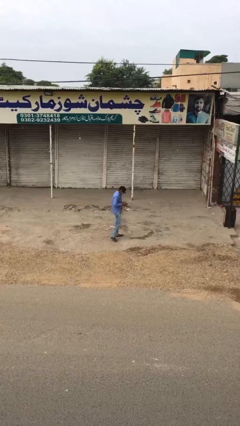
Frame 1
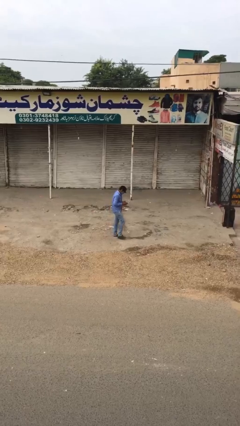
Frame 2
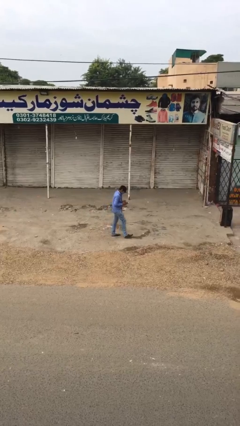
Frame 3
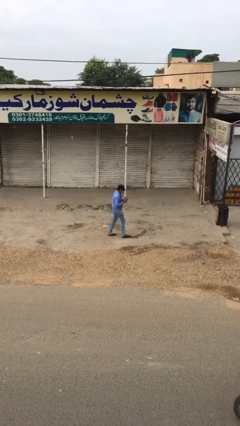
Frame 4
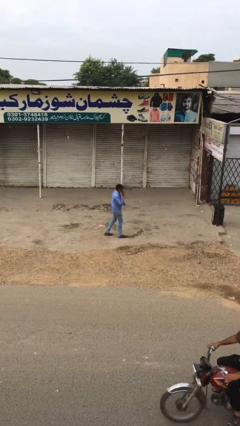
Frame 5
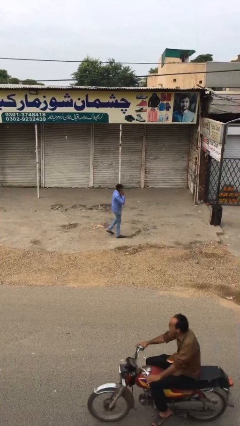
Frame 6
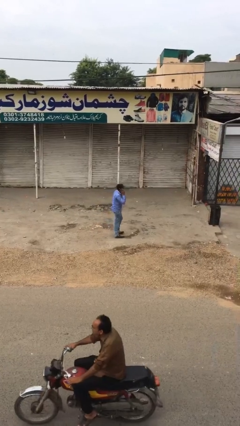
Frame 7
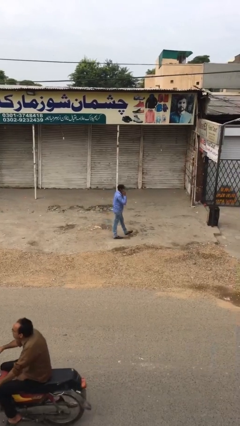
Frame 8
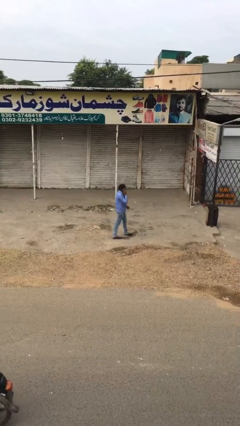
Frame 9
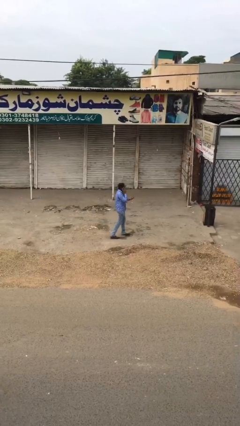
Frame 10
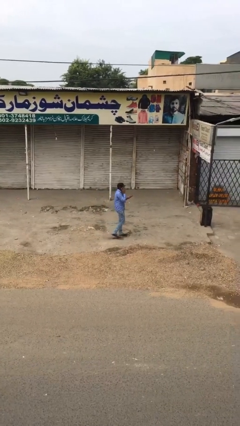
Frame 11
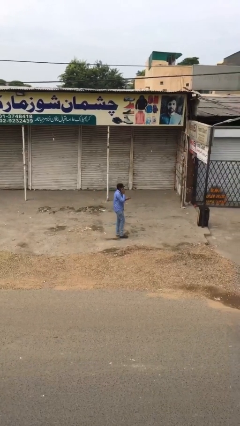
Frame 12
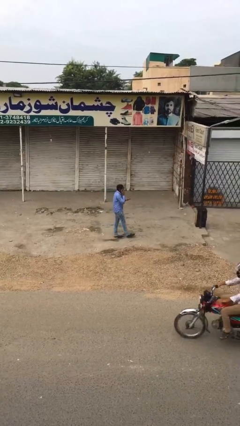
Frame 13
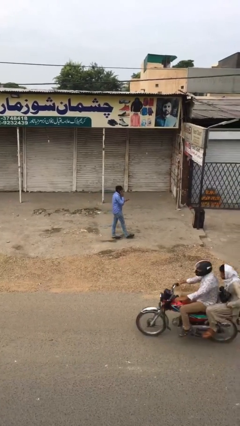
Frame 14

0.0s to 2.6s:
person talks on phone

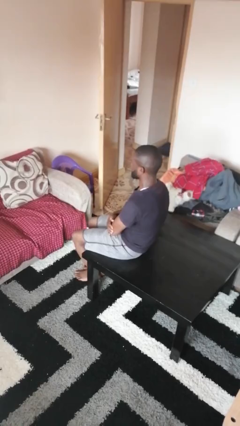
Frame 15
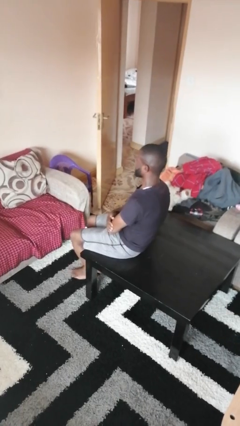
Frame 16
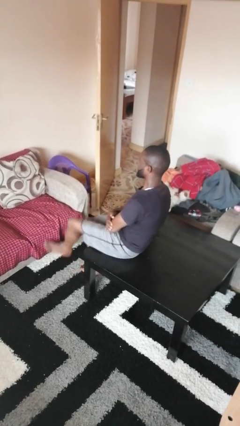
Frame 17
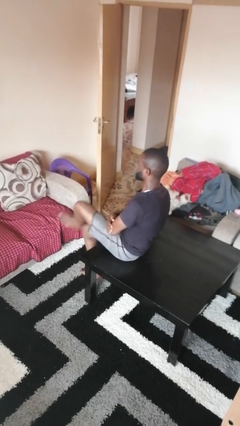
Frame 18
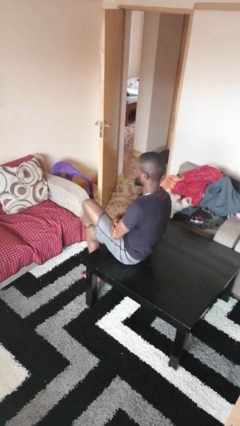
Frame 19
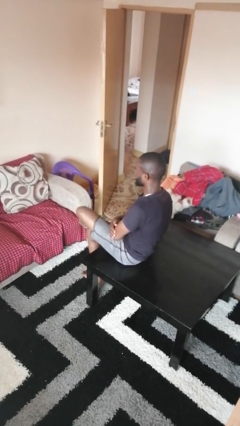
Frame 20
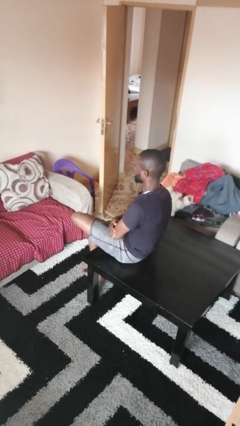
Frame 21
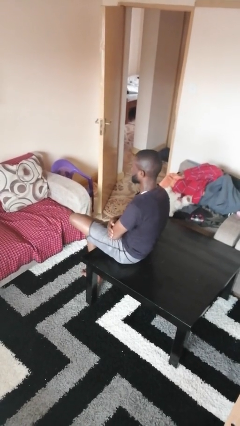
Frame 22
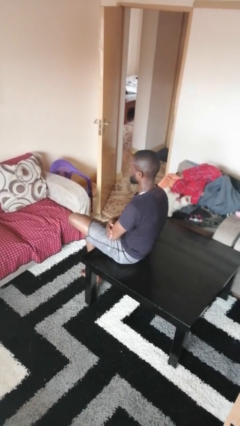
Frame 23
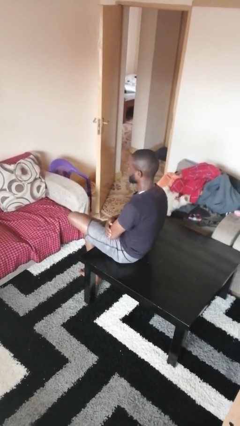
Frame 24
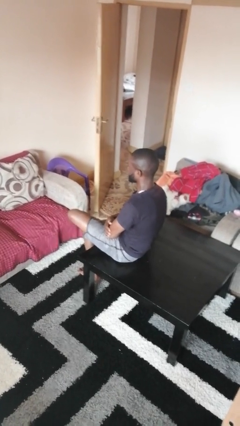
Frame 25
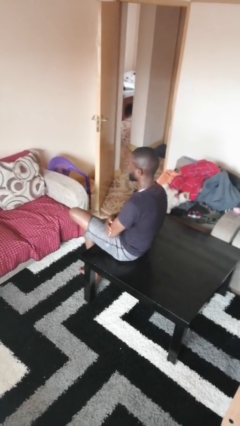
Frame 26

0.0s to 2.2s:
person crosses legs

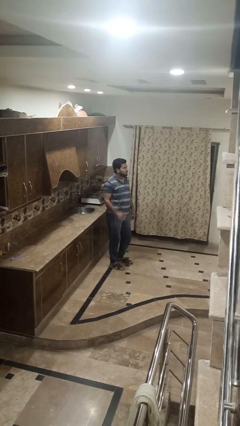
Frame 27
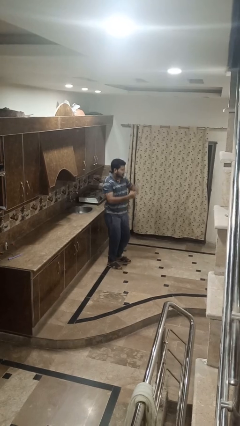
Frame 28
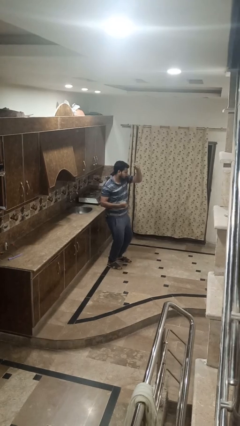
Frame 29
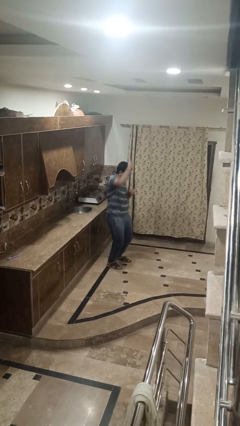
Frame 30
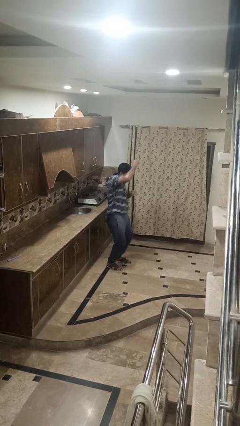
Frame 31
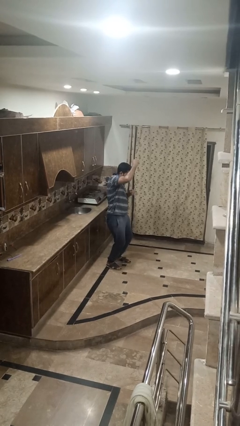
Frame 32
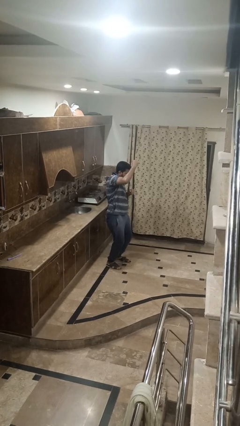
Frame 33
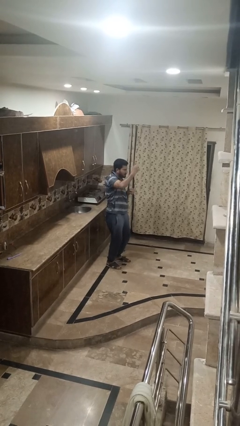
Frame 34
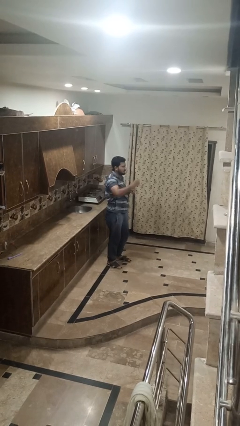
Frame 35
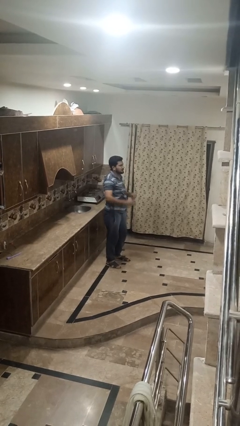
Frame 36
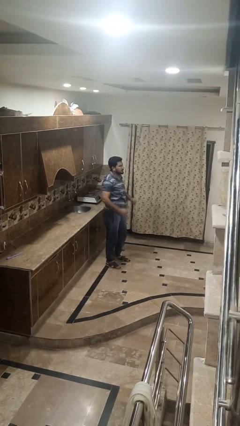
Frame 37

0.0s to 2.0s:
person punches

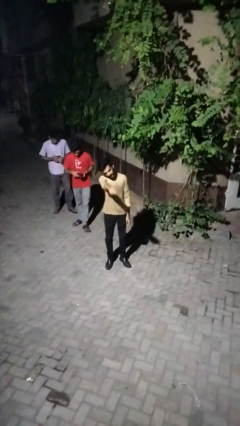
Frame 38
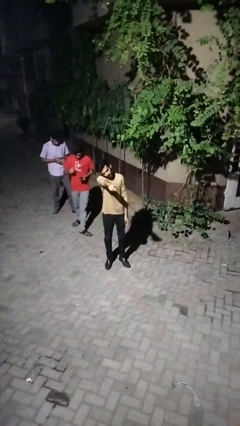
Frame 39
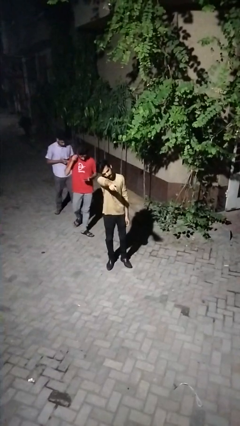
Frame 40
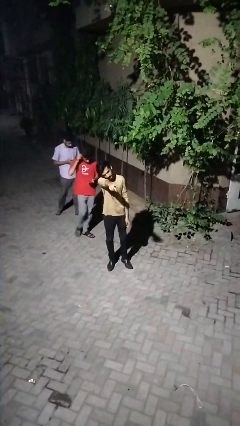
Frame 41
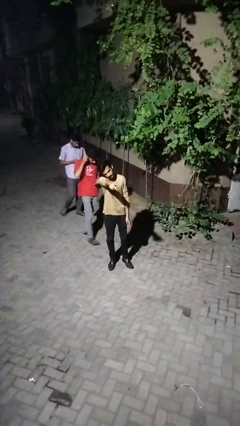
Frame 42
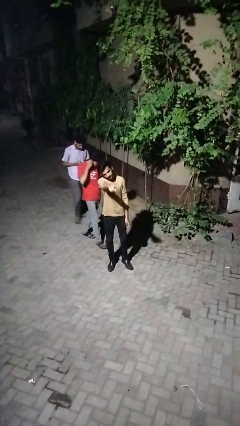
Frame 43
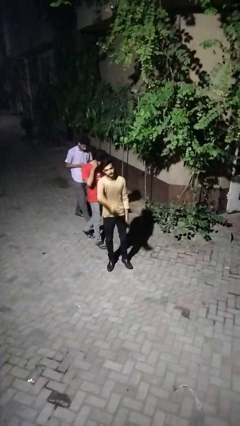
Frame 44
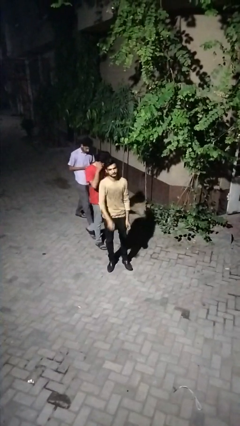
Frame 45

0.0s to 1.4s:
person points at person

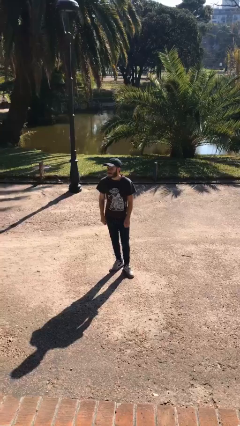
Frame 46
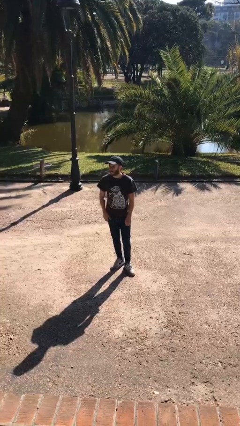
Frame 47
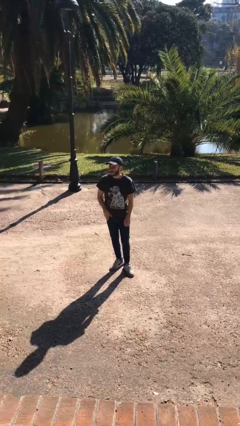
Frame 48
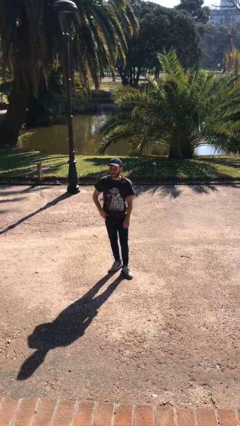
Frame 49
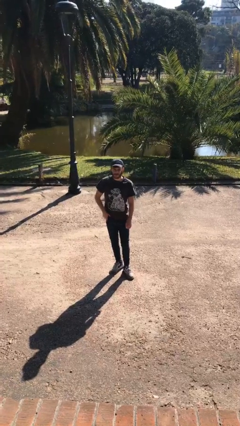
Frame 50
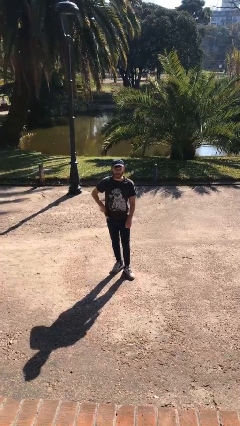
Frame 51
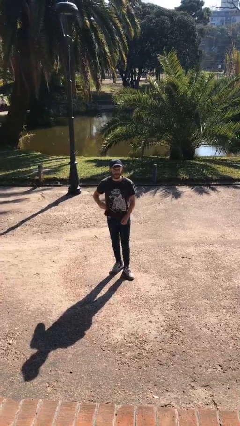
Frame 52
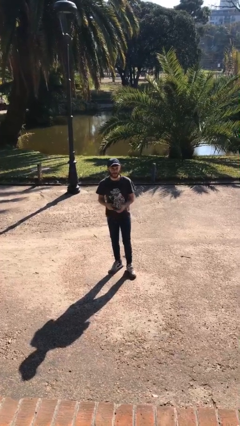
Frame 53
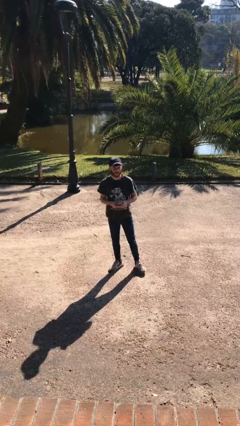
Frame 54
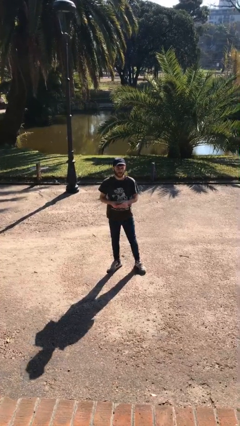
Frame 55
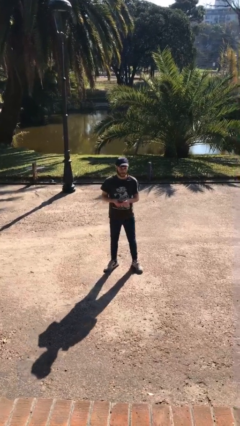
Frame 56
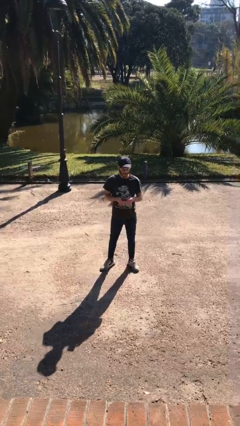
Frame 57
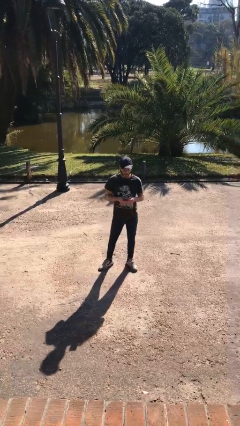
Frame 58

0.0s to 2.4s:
person takes phone from pocket

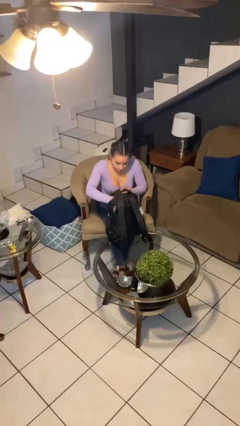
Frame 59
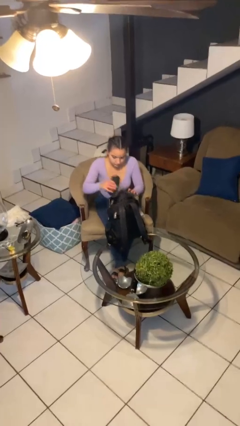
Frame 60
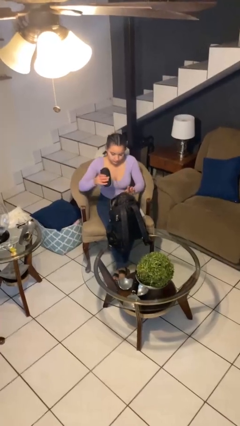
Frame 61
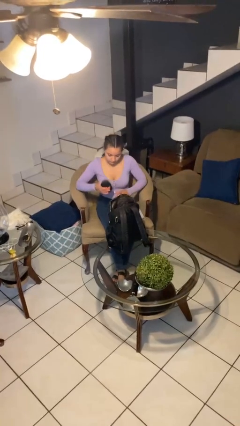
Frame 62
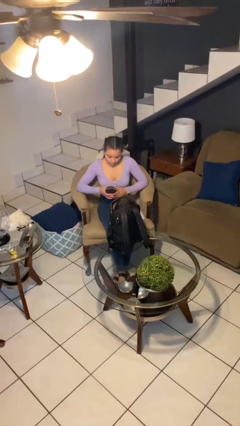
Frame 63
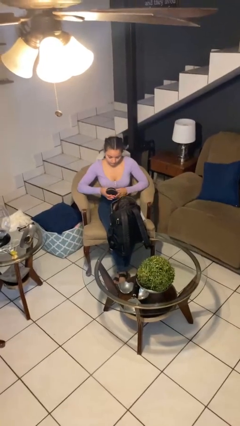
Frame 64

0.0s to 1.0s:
person takes object from backpack

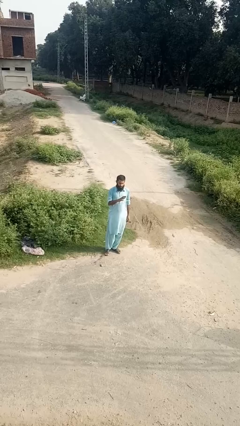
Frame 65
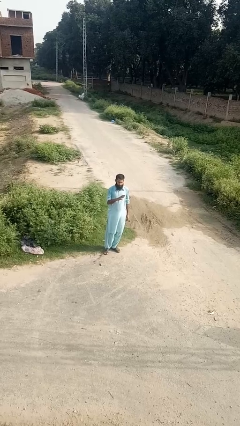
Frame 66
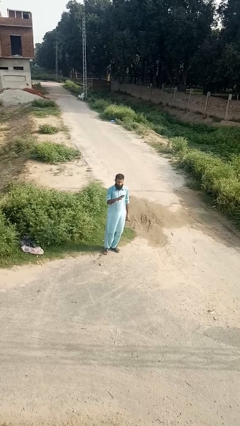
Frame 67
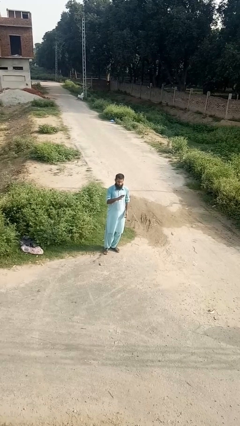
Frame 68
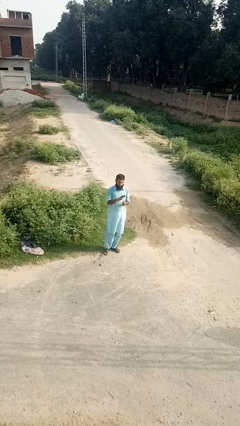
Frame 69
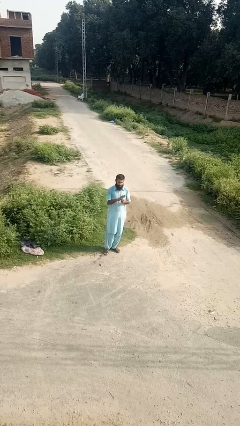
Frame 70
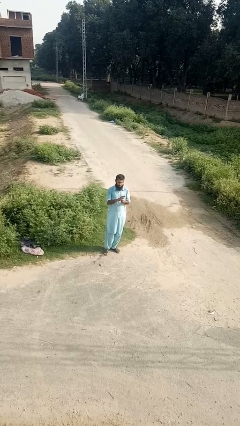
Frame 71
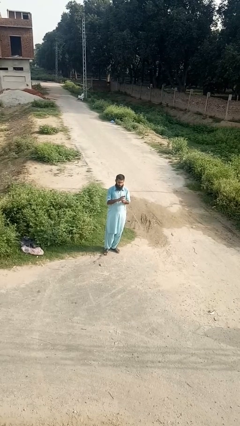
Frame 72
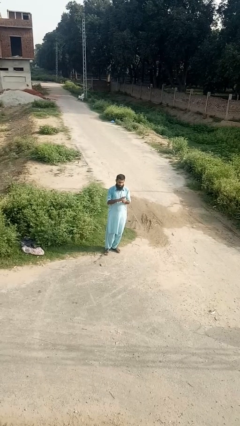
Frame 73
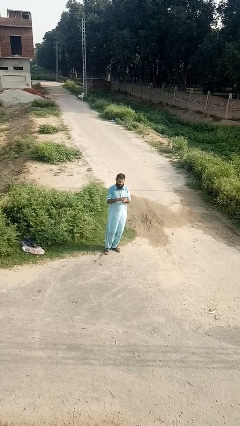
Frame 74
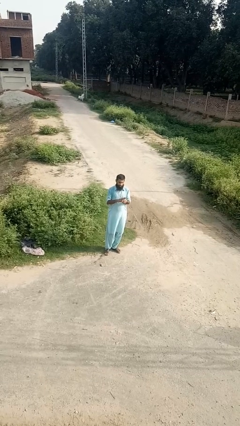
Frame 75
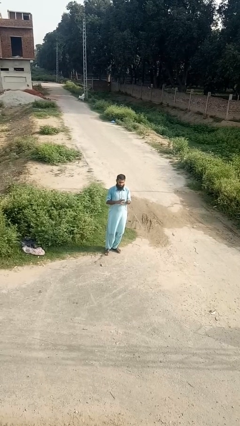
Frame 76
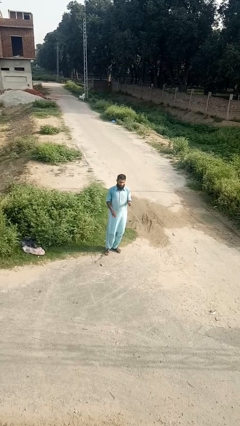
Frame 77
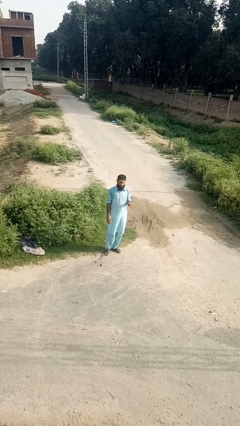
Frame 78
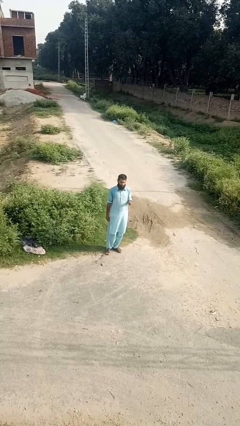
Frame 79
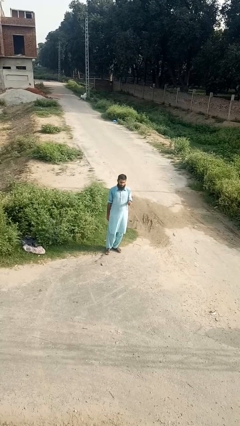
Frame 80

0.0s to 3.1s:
person takes off ring

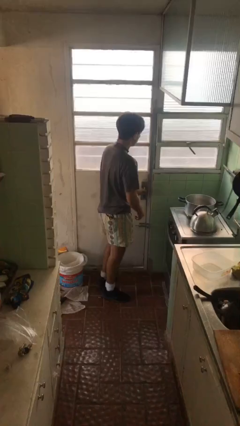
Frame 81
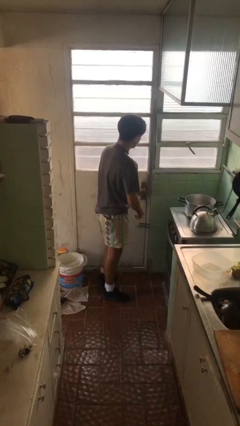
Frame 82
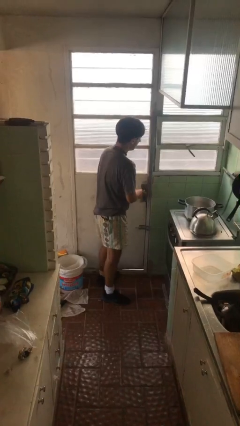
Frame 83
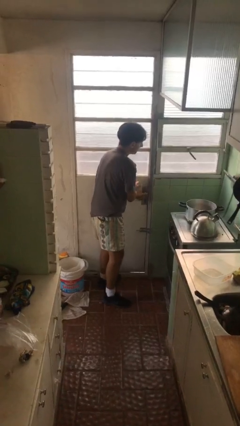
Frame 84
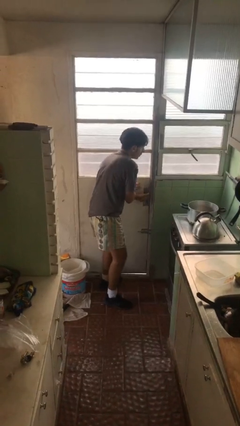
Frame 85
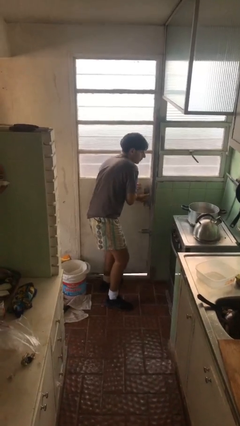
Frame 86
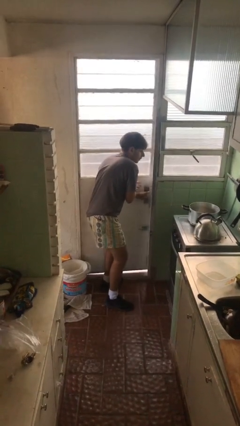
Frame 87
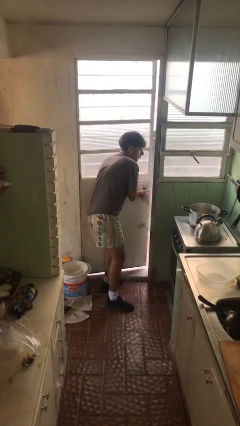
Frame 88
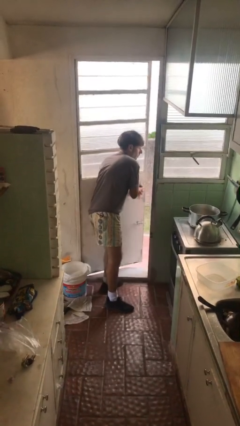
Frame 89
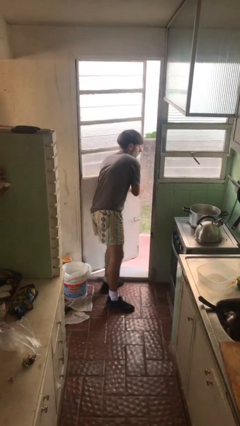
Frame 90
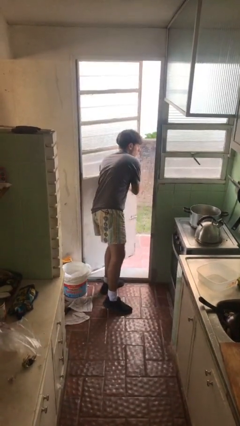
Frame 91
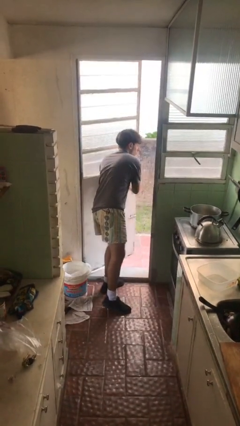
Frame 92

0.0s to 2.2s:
person opens facility door
